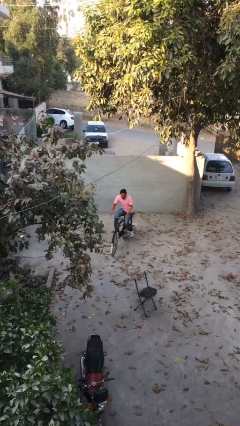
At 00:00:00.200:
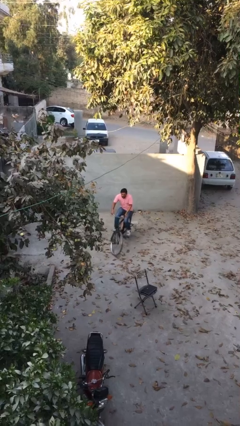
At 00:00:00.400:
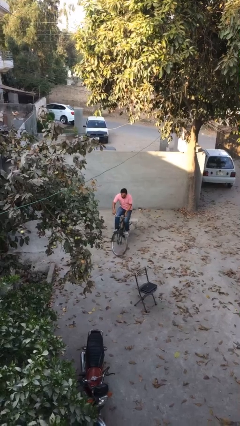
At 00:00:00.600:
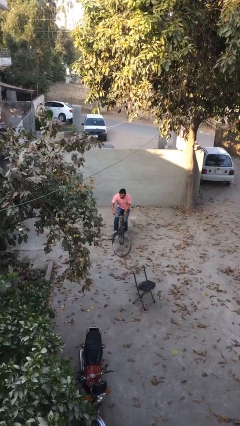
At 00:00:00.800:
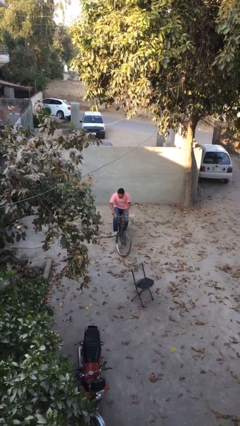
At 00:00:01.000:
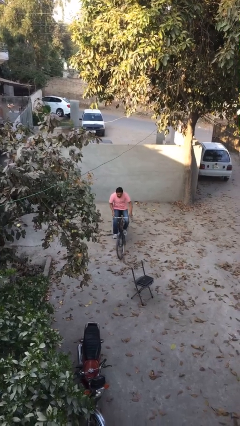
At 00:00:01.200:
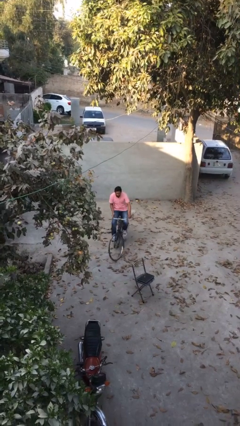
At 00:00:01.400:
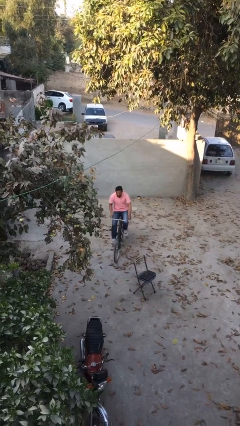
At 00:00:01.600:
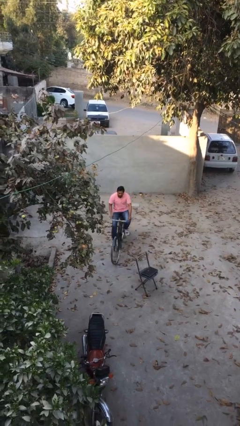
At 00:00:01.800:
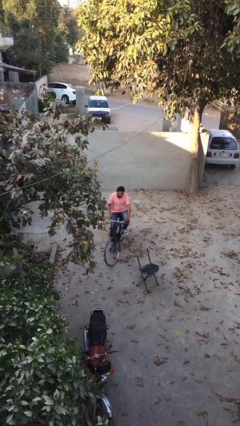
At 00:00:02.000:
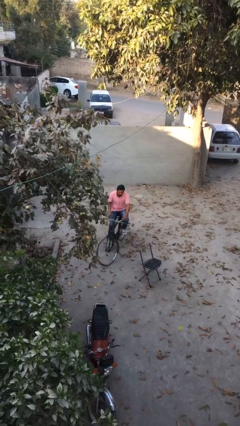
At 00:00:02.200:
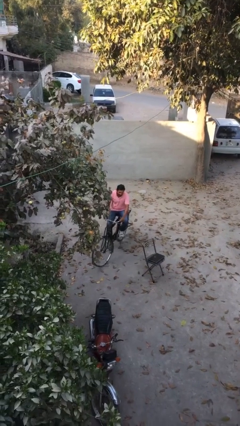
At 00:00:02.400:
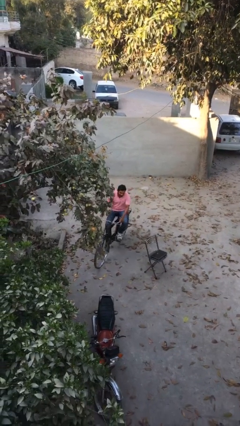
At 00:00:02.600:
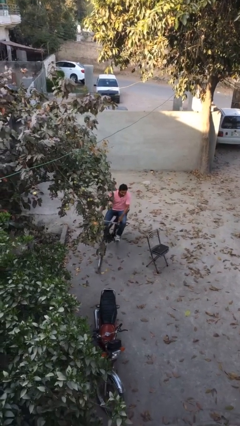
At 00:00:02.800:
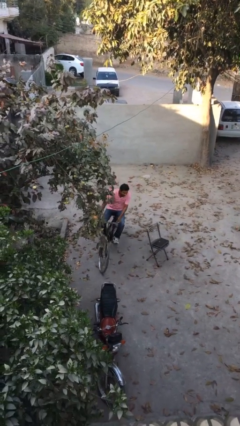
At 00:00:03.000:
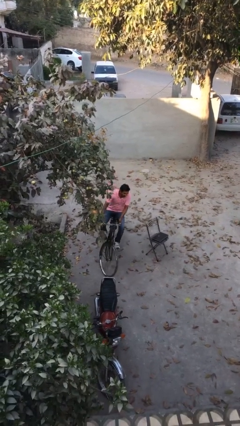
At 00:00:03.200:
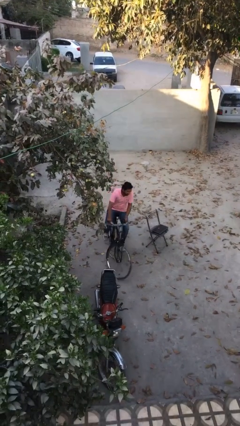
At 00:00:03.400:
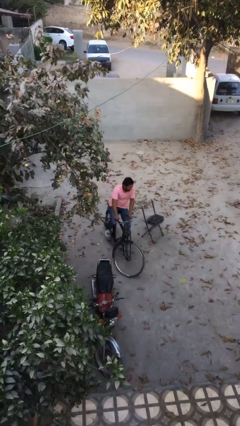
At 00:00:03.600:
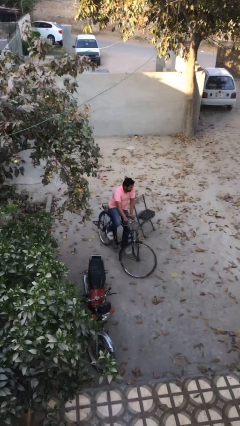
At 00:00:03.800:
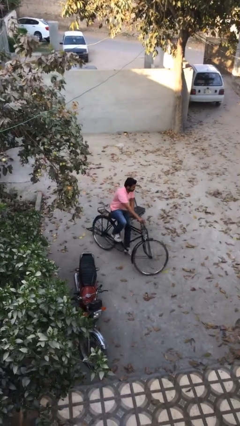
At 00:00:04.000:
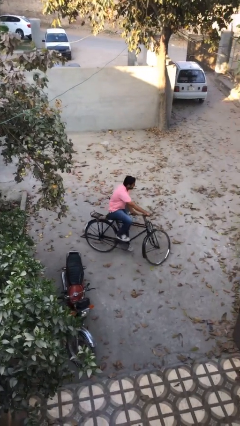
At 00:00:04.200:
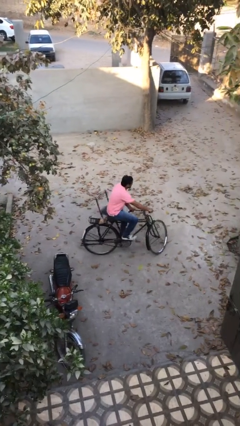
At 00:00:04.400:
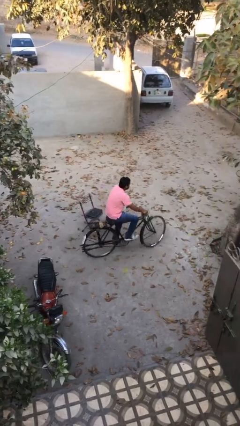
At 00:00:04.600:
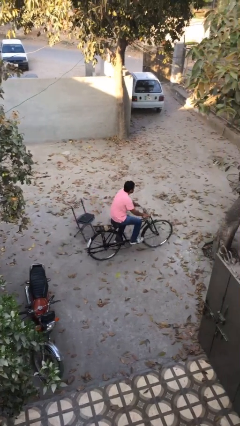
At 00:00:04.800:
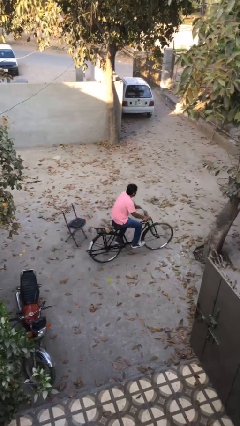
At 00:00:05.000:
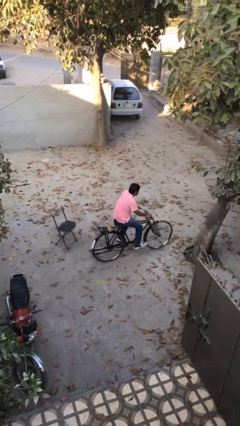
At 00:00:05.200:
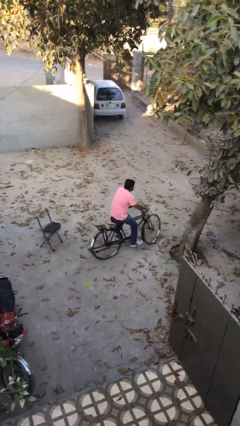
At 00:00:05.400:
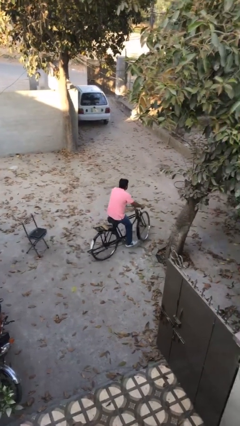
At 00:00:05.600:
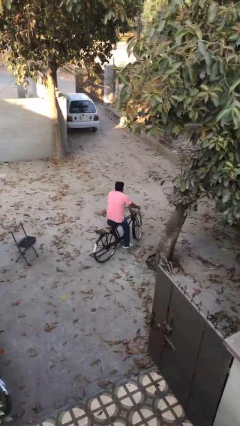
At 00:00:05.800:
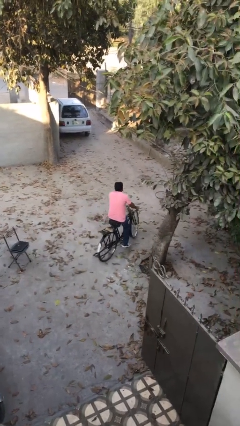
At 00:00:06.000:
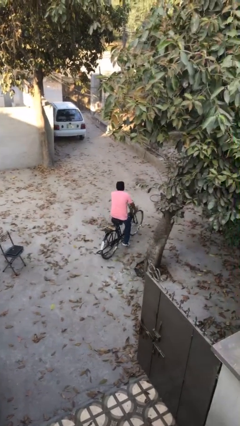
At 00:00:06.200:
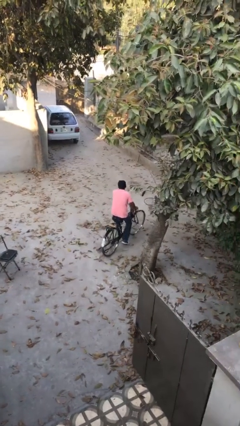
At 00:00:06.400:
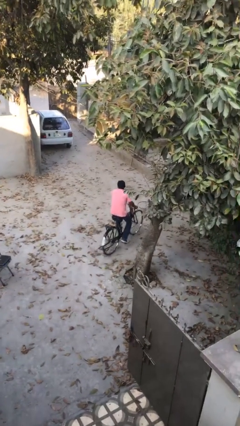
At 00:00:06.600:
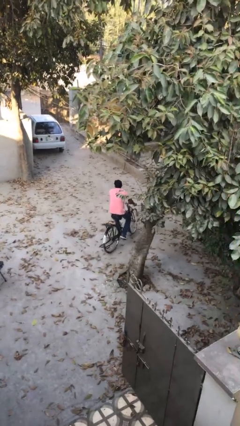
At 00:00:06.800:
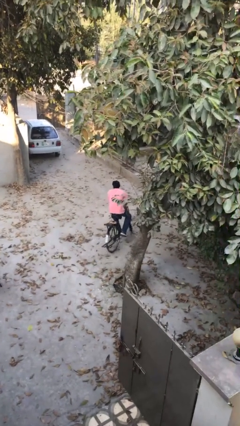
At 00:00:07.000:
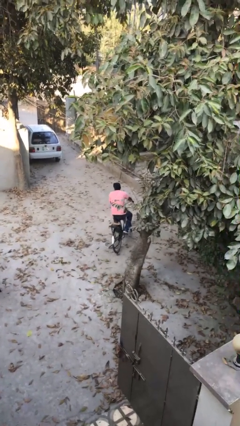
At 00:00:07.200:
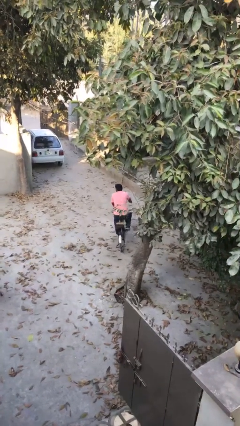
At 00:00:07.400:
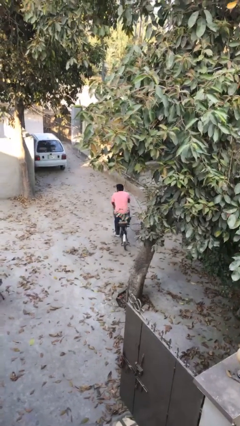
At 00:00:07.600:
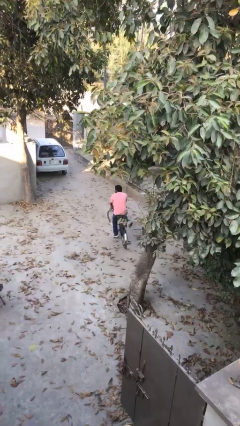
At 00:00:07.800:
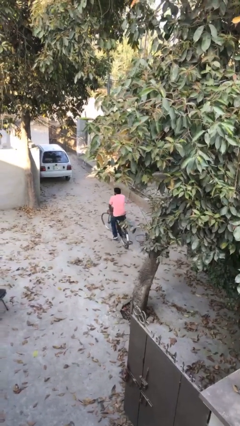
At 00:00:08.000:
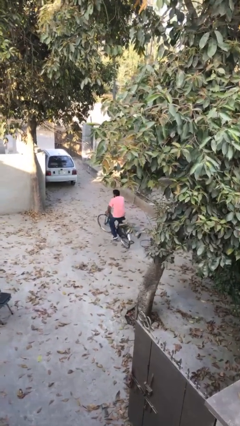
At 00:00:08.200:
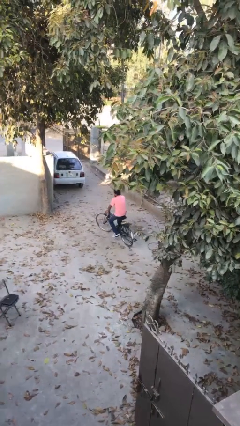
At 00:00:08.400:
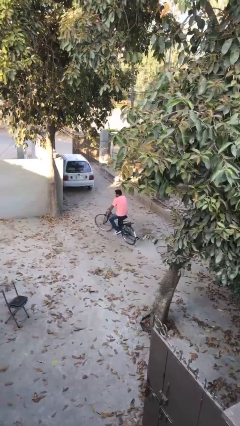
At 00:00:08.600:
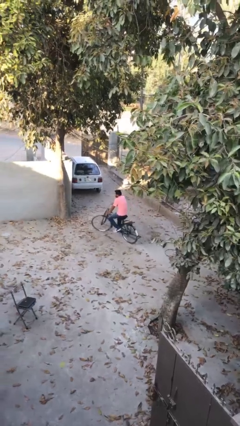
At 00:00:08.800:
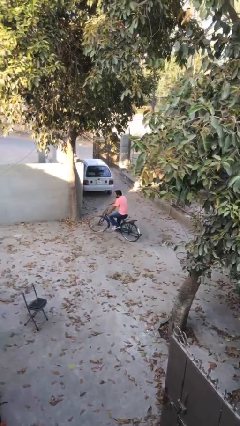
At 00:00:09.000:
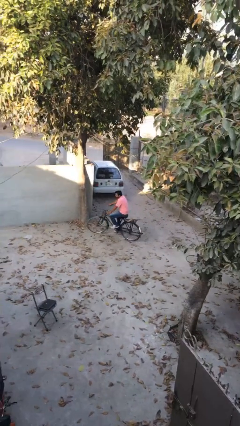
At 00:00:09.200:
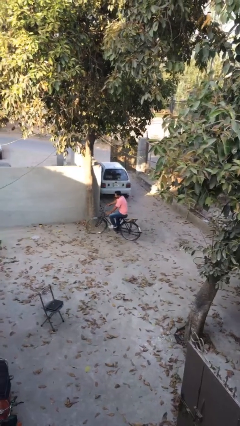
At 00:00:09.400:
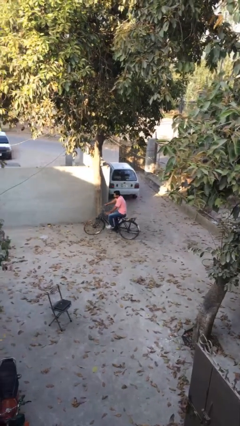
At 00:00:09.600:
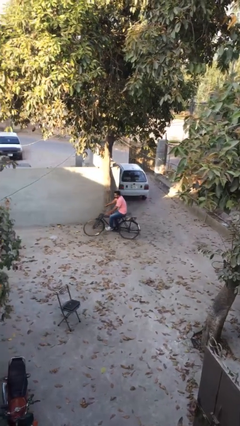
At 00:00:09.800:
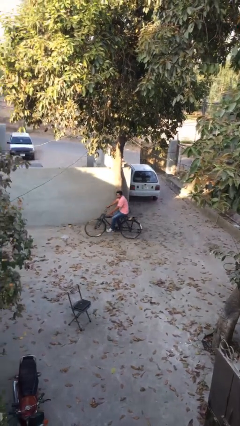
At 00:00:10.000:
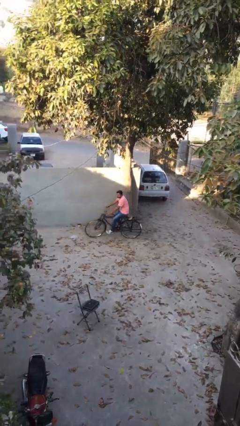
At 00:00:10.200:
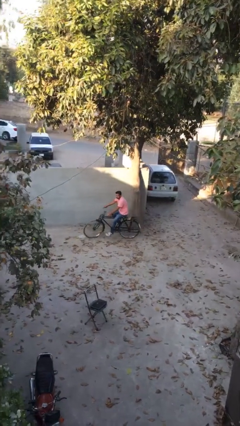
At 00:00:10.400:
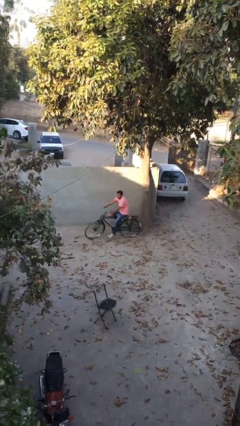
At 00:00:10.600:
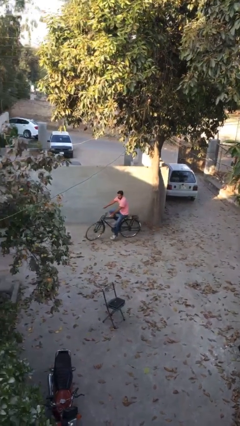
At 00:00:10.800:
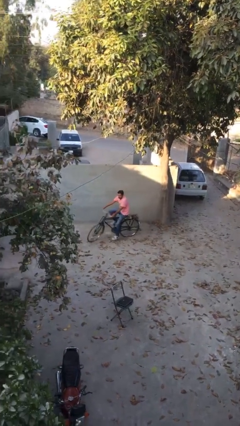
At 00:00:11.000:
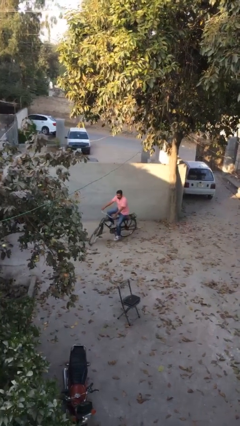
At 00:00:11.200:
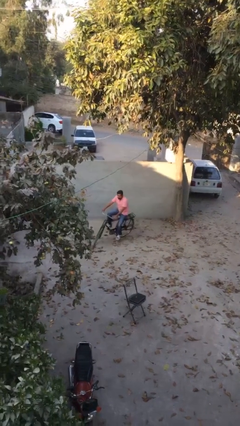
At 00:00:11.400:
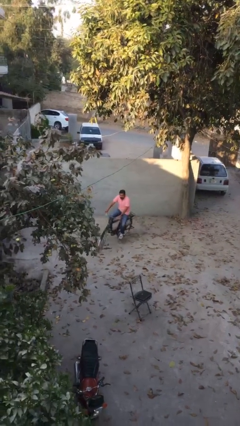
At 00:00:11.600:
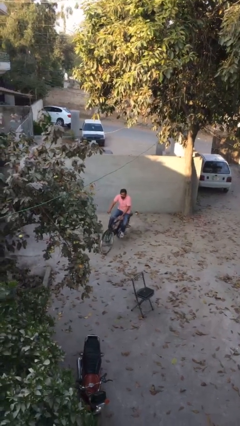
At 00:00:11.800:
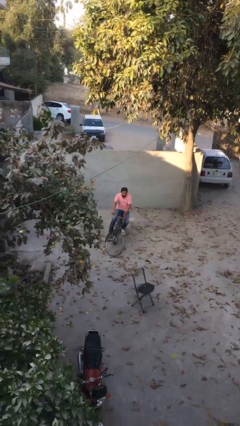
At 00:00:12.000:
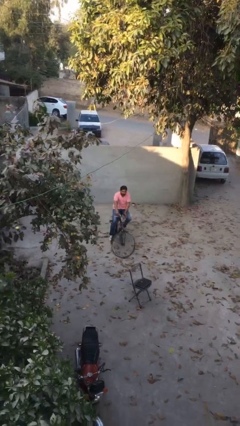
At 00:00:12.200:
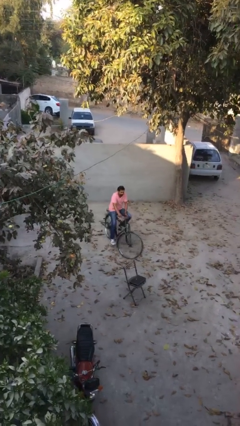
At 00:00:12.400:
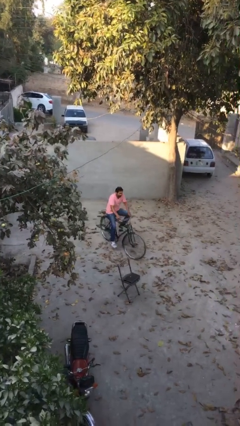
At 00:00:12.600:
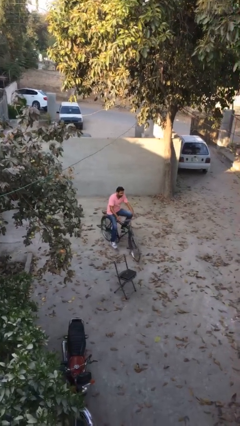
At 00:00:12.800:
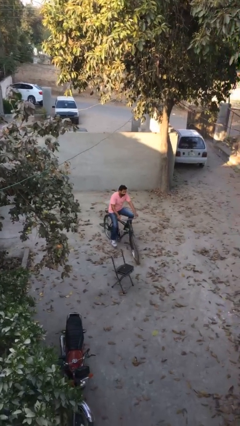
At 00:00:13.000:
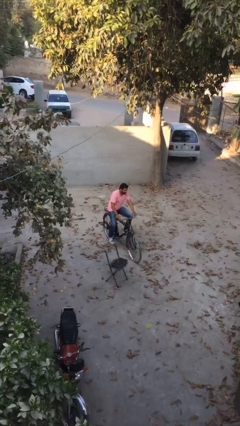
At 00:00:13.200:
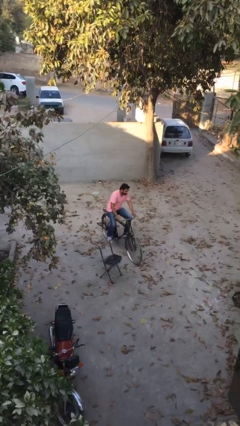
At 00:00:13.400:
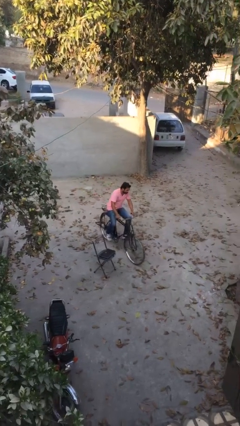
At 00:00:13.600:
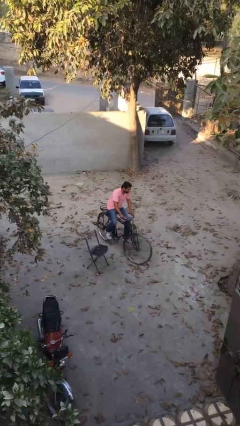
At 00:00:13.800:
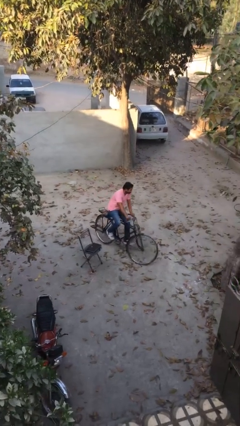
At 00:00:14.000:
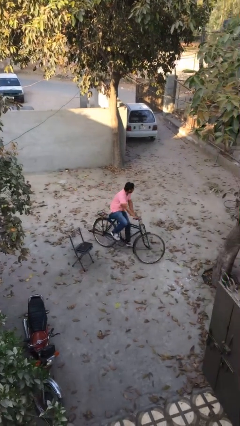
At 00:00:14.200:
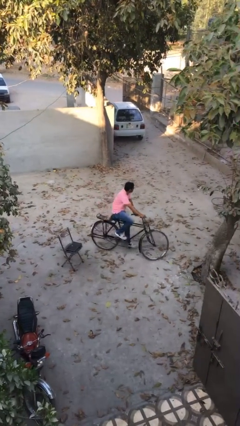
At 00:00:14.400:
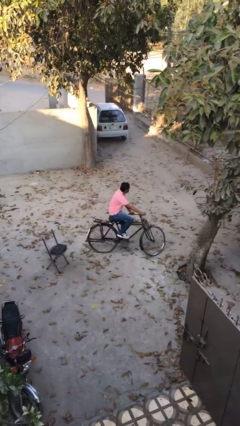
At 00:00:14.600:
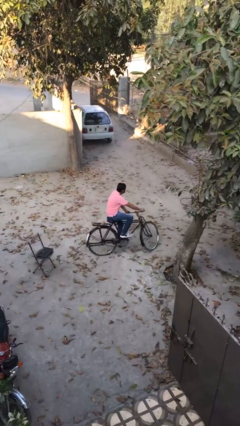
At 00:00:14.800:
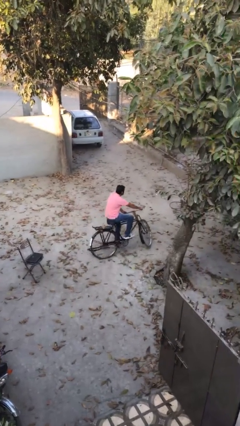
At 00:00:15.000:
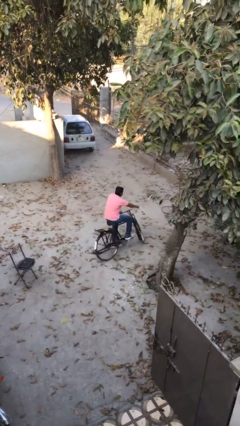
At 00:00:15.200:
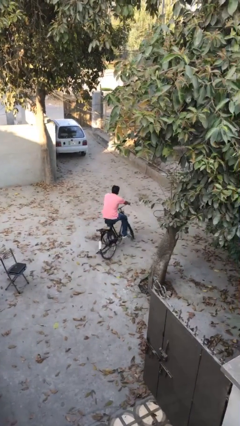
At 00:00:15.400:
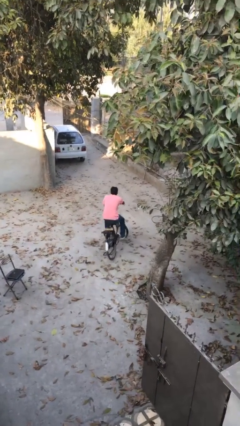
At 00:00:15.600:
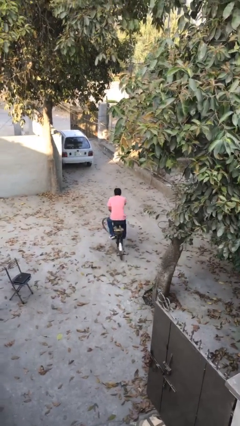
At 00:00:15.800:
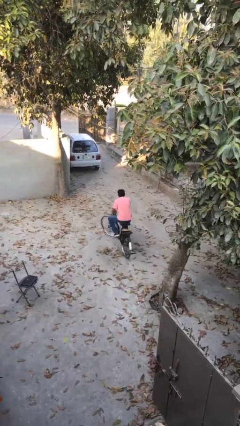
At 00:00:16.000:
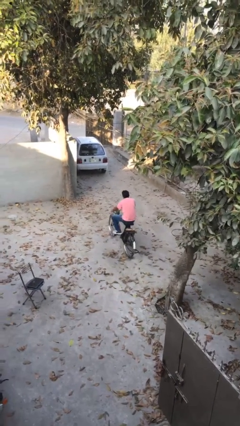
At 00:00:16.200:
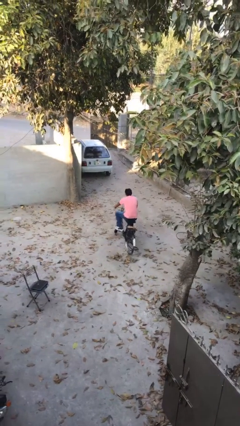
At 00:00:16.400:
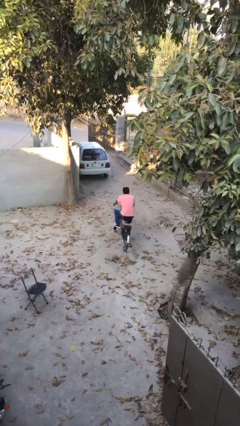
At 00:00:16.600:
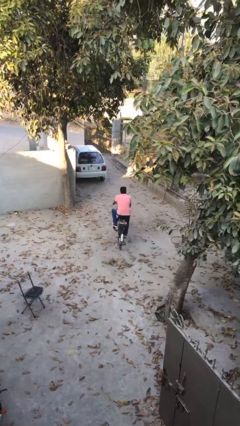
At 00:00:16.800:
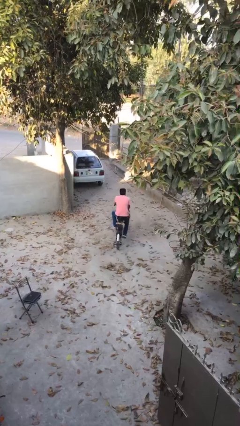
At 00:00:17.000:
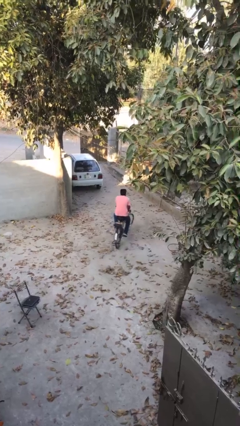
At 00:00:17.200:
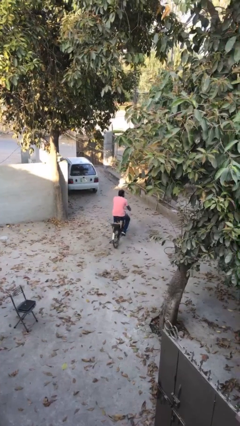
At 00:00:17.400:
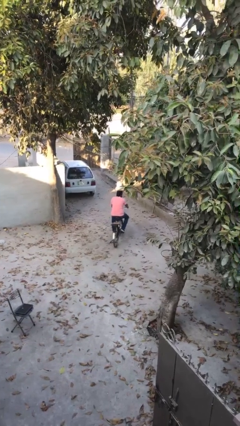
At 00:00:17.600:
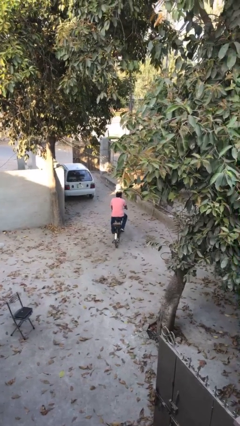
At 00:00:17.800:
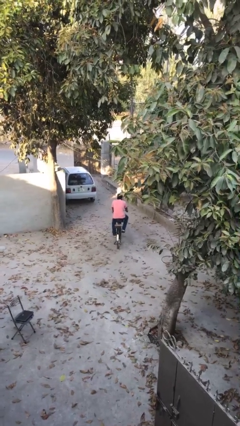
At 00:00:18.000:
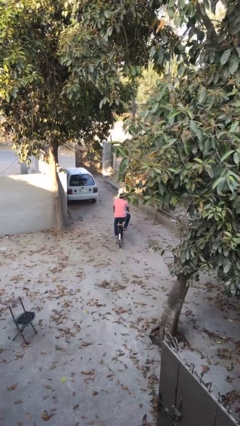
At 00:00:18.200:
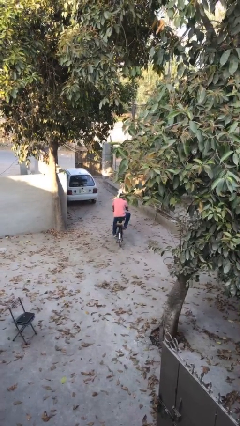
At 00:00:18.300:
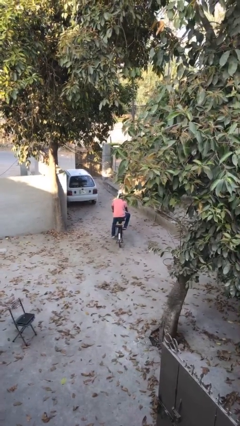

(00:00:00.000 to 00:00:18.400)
person rides bicycle
